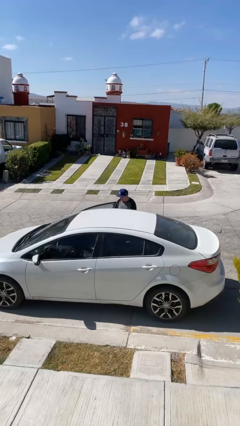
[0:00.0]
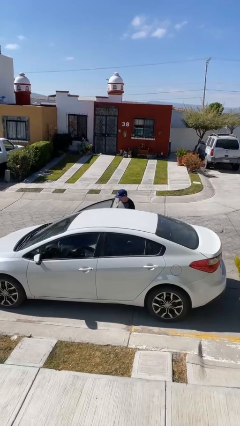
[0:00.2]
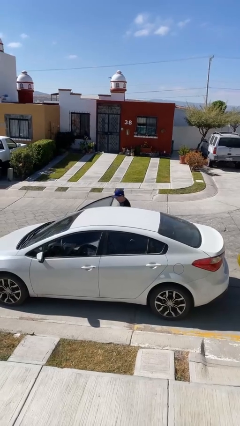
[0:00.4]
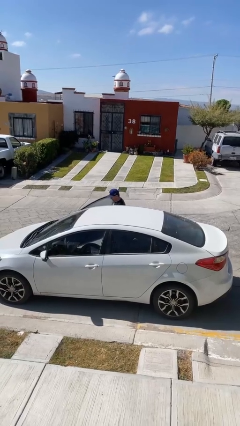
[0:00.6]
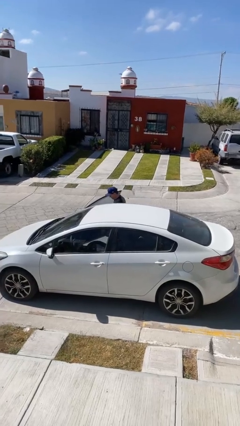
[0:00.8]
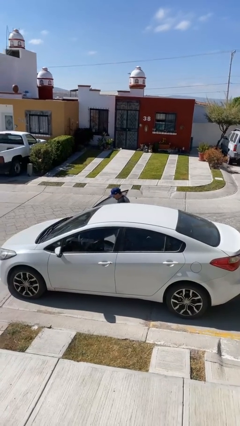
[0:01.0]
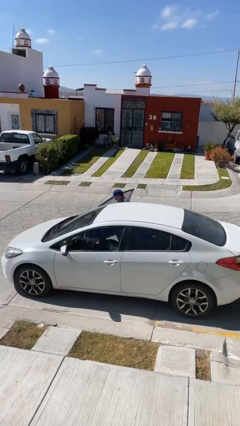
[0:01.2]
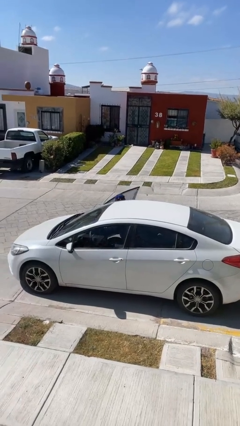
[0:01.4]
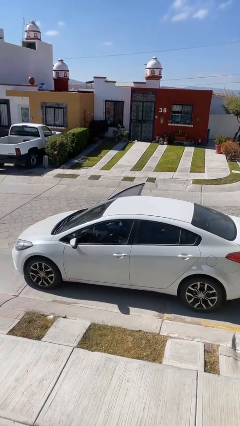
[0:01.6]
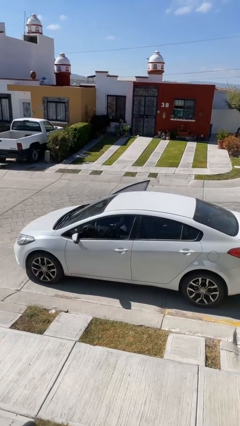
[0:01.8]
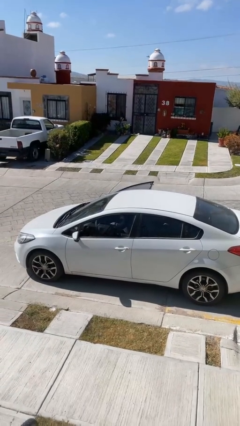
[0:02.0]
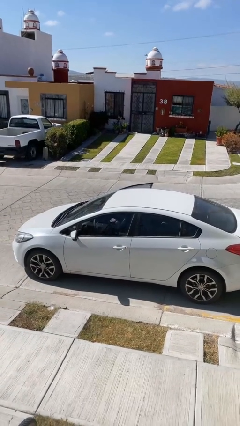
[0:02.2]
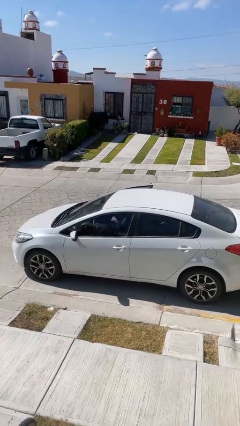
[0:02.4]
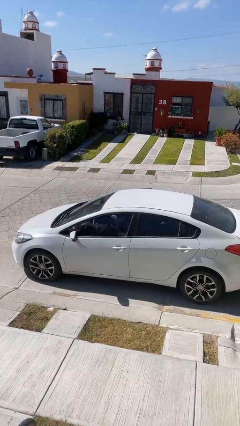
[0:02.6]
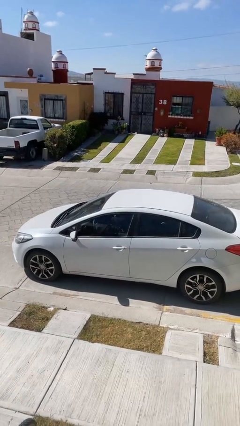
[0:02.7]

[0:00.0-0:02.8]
car picks up person

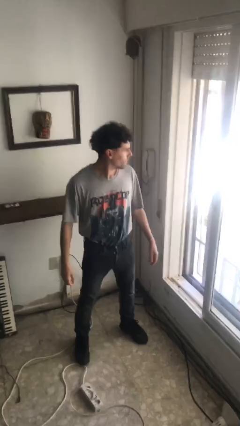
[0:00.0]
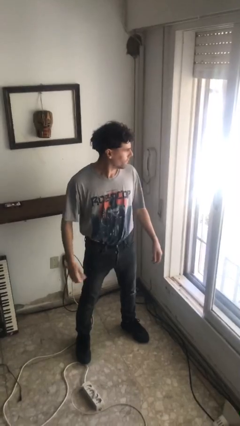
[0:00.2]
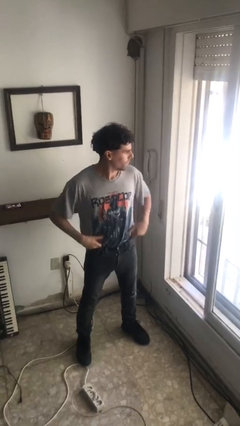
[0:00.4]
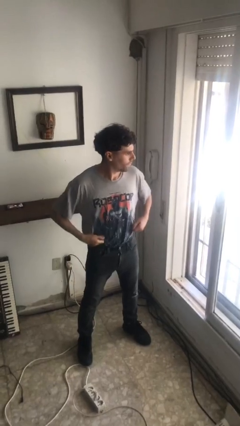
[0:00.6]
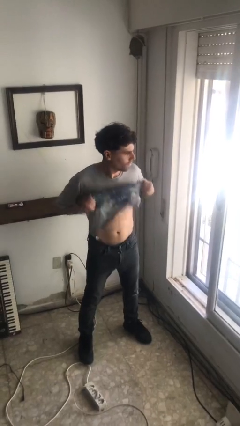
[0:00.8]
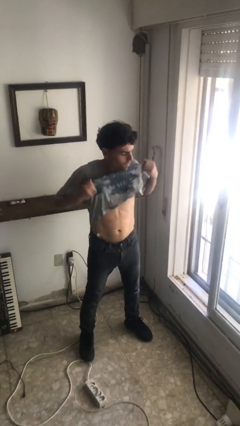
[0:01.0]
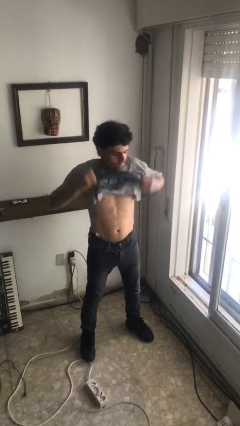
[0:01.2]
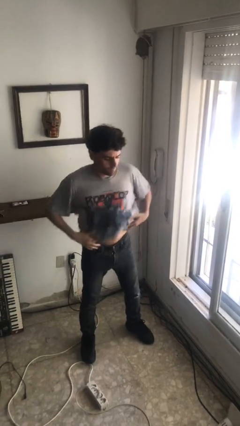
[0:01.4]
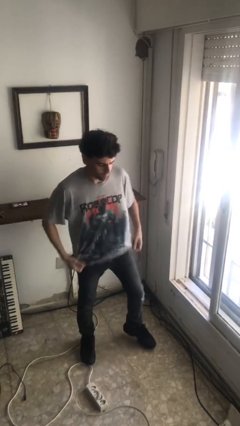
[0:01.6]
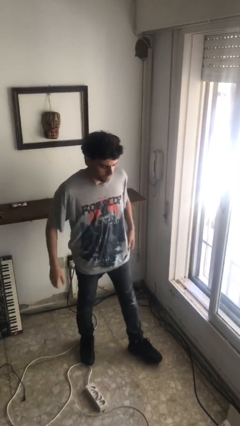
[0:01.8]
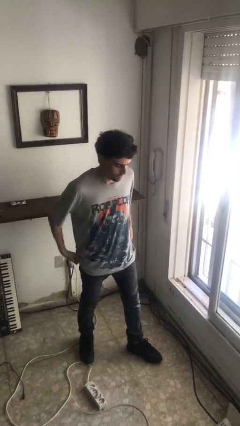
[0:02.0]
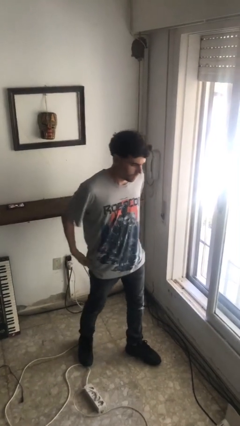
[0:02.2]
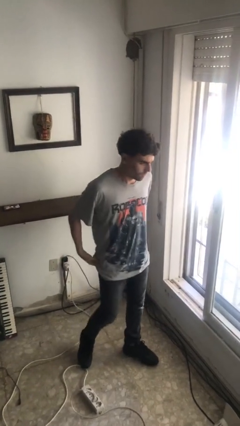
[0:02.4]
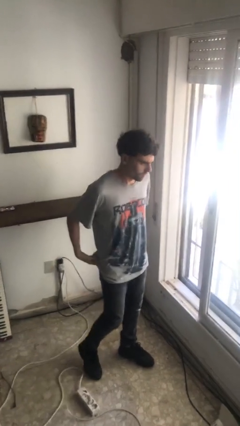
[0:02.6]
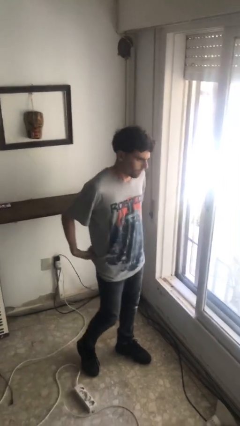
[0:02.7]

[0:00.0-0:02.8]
person untucks shirt

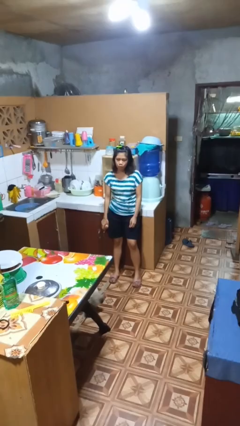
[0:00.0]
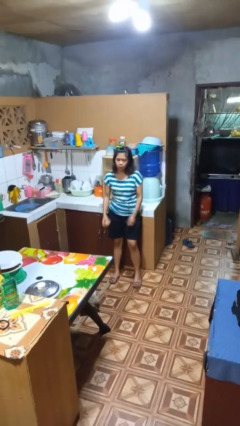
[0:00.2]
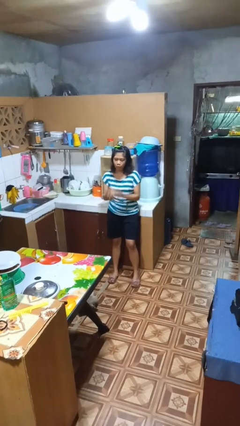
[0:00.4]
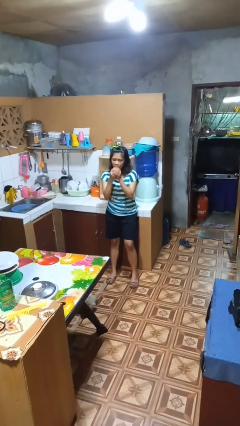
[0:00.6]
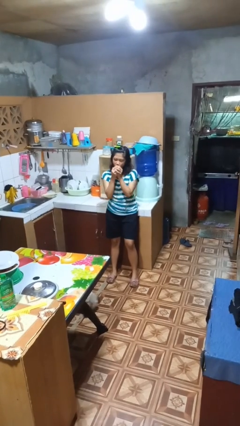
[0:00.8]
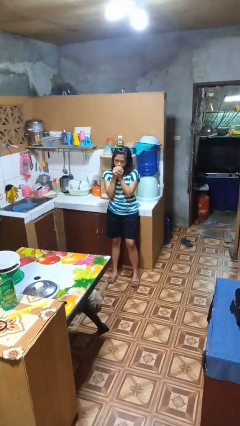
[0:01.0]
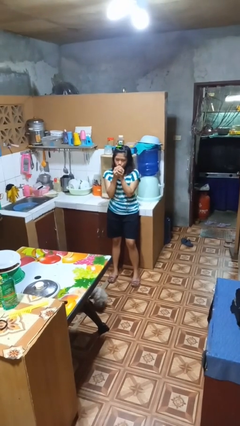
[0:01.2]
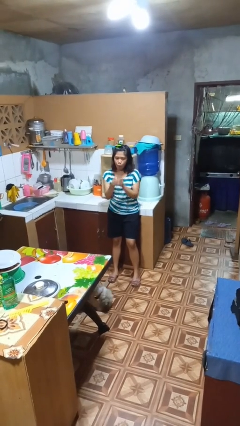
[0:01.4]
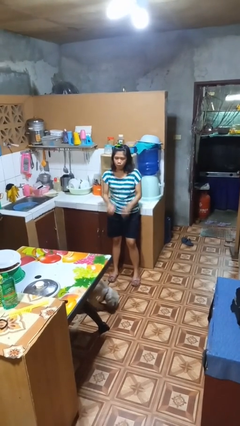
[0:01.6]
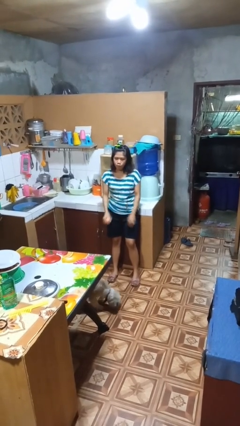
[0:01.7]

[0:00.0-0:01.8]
person eats apple

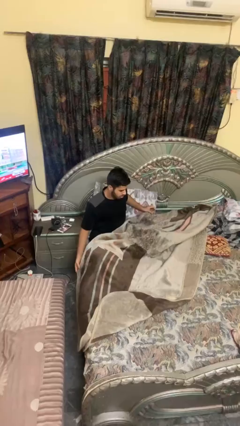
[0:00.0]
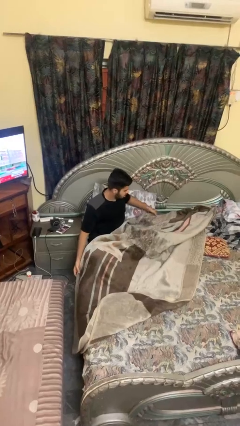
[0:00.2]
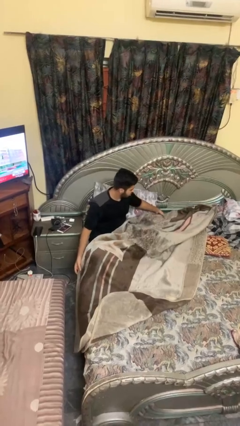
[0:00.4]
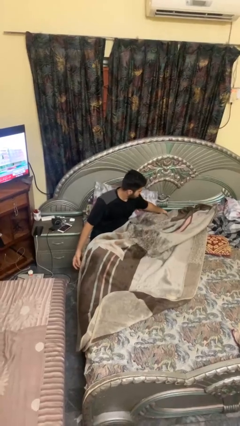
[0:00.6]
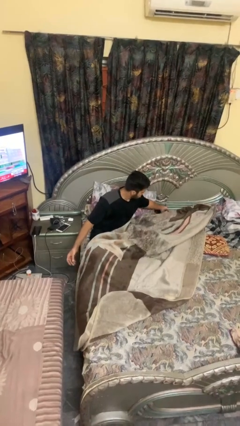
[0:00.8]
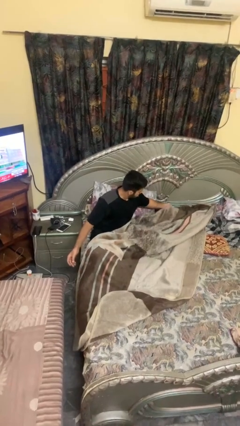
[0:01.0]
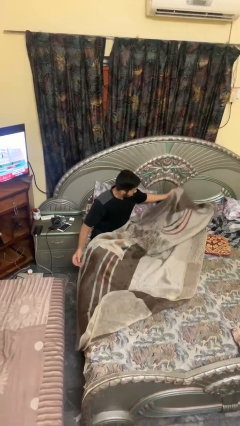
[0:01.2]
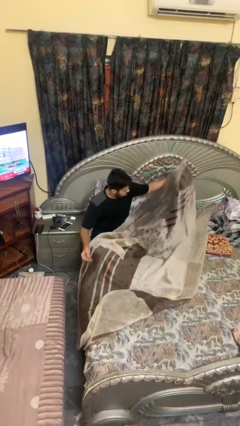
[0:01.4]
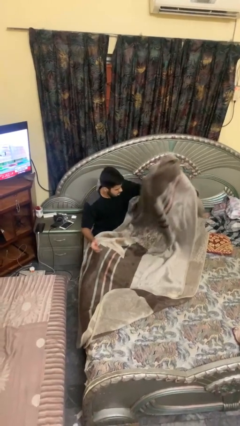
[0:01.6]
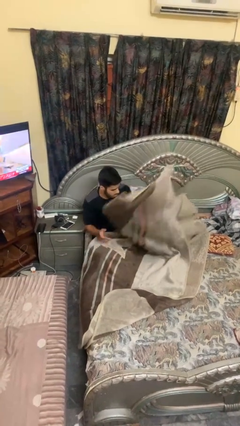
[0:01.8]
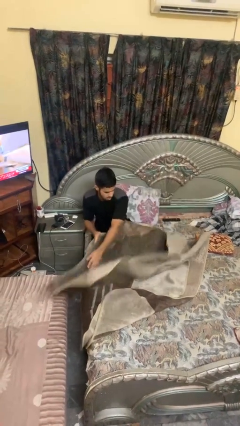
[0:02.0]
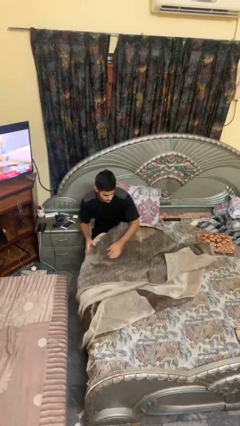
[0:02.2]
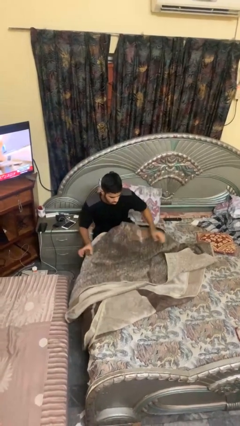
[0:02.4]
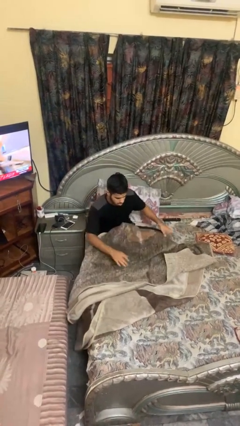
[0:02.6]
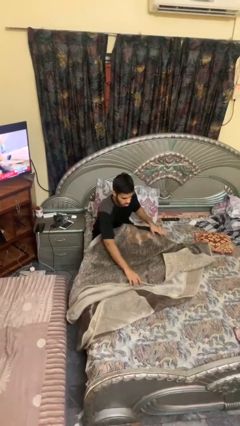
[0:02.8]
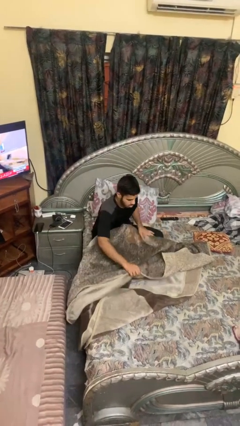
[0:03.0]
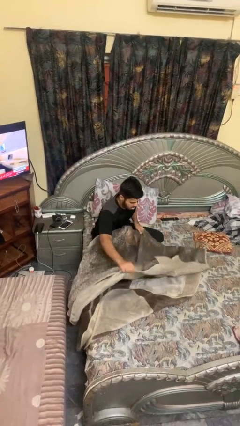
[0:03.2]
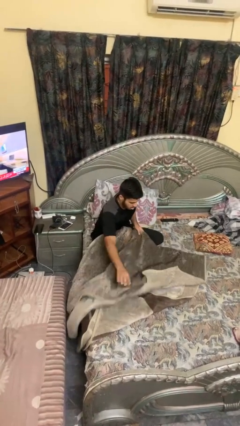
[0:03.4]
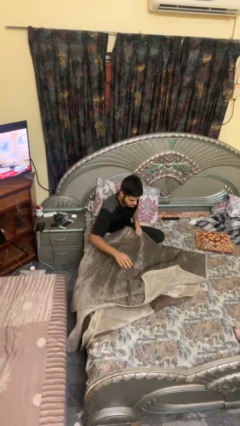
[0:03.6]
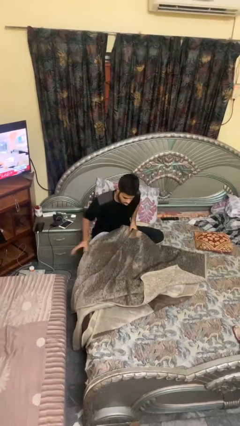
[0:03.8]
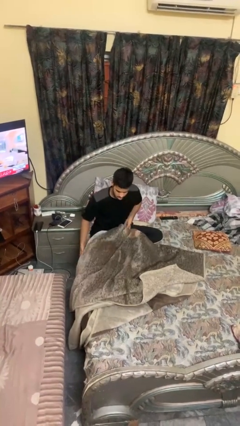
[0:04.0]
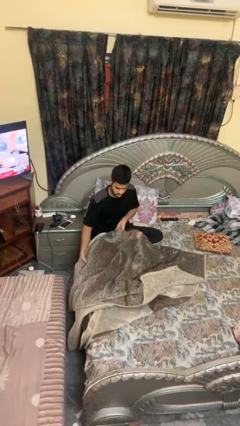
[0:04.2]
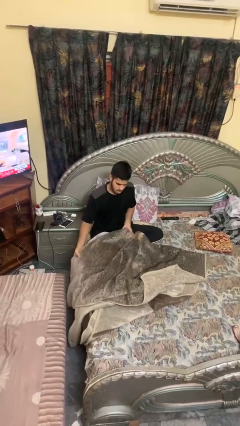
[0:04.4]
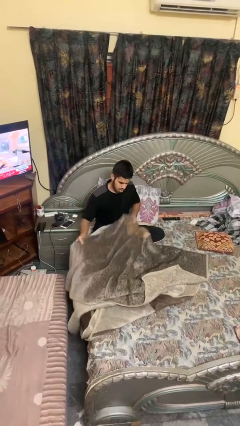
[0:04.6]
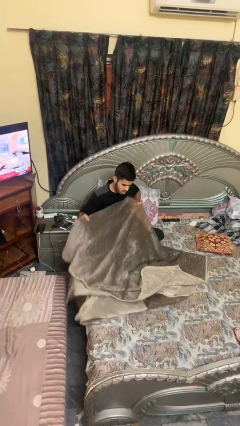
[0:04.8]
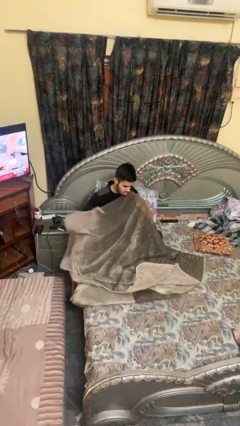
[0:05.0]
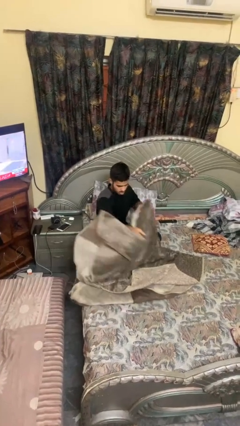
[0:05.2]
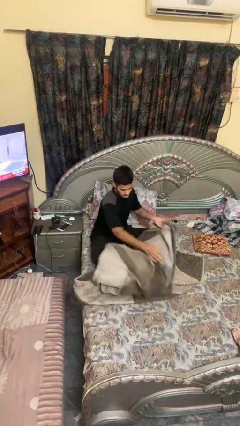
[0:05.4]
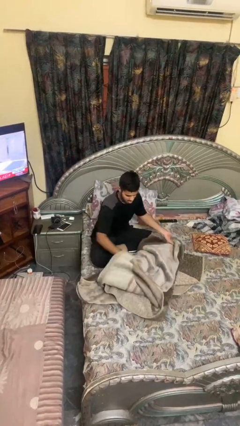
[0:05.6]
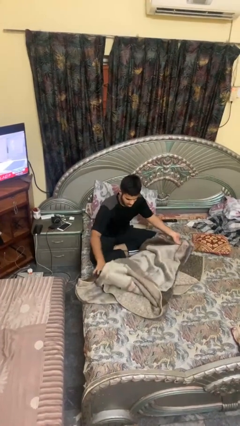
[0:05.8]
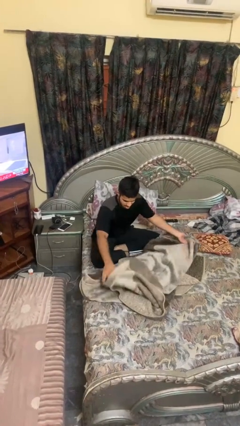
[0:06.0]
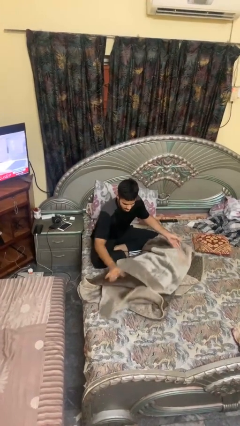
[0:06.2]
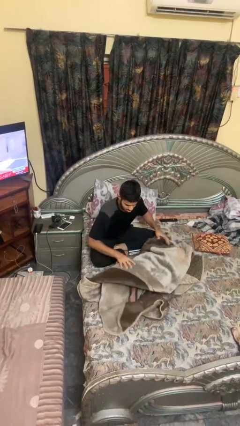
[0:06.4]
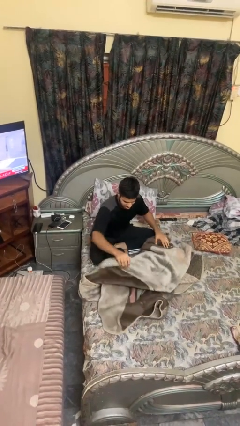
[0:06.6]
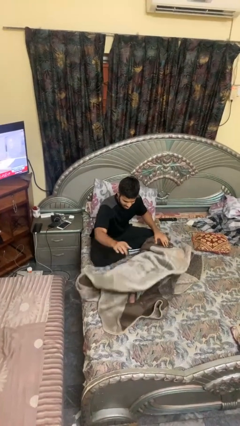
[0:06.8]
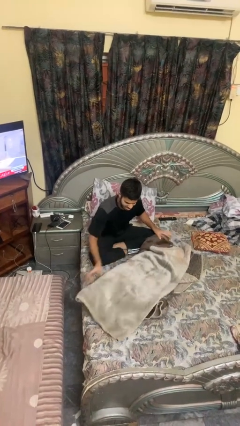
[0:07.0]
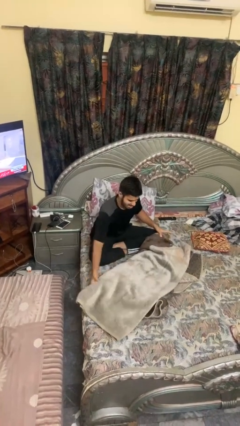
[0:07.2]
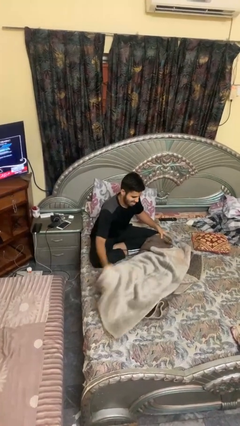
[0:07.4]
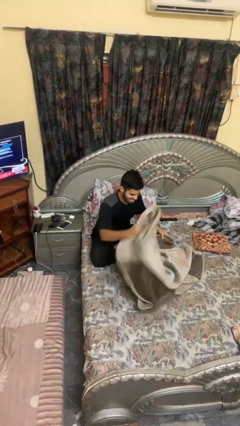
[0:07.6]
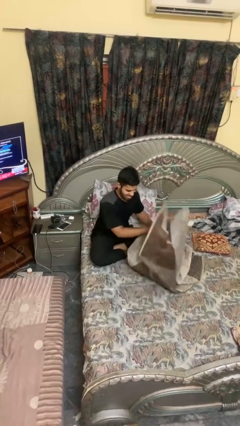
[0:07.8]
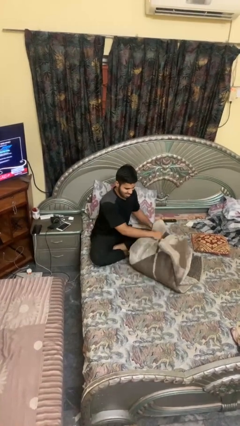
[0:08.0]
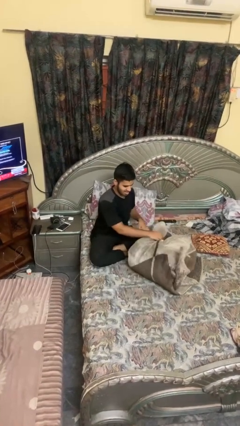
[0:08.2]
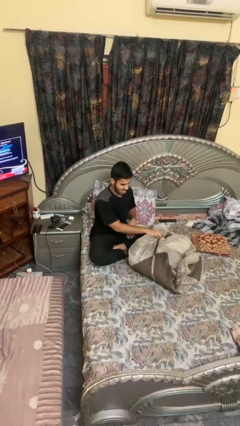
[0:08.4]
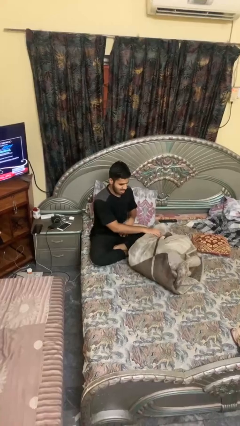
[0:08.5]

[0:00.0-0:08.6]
person folds blanket

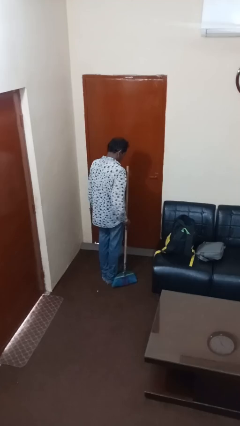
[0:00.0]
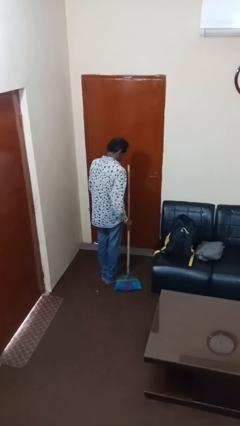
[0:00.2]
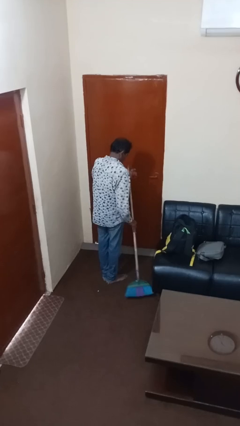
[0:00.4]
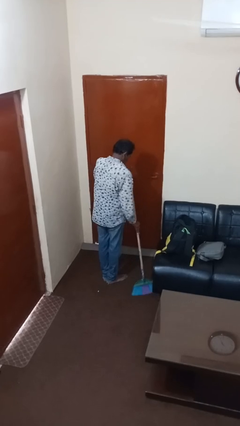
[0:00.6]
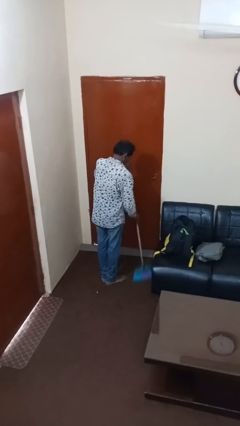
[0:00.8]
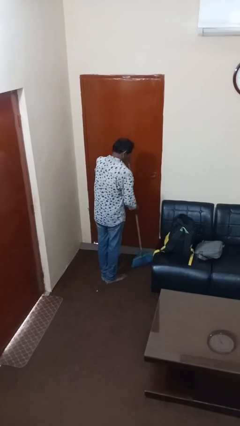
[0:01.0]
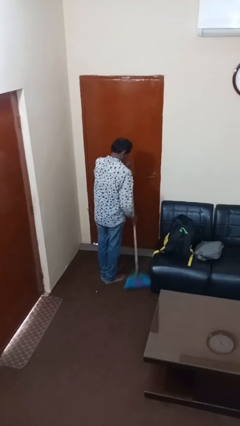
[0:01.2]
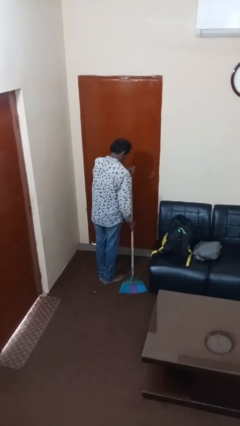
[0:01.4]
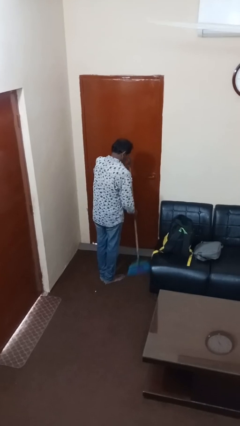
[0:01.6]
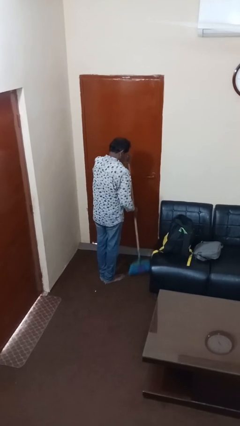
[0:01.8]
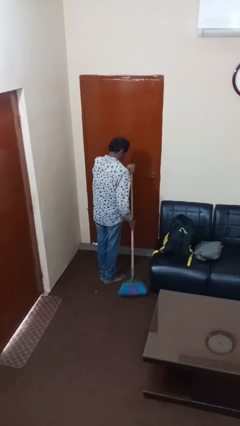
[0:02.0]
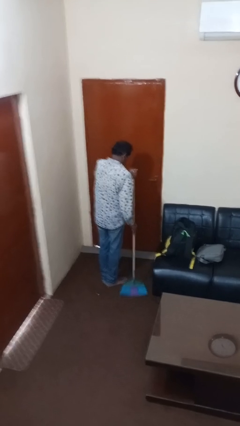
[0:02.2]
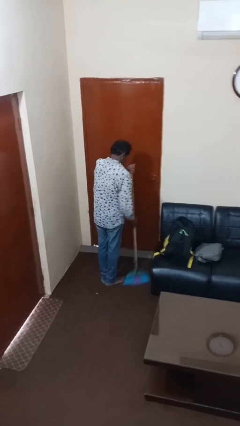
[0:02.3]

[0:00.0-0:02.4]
person sweeps floor
